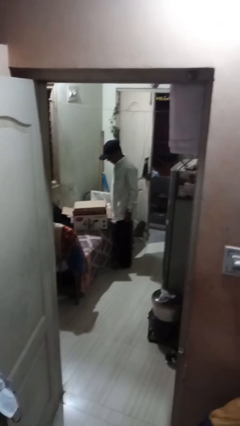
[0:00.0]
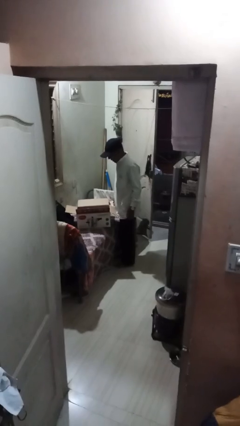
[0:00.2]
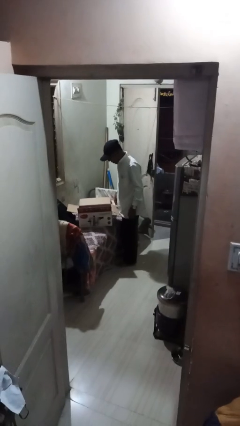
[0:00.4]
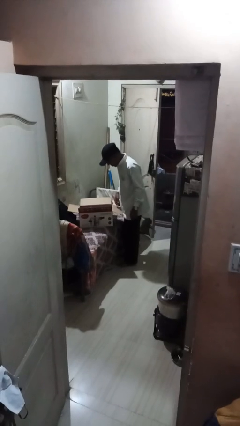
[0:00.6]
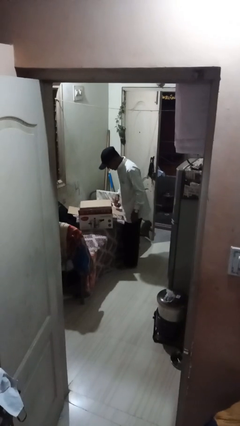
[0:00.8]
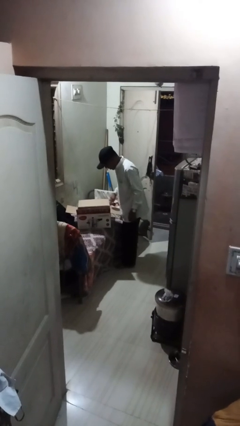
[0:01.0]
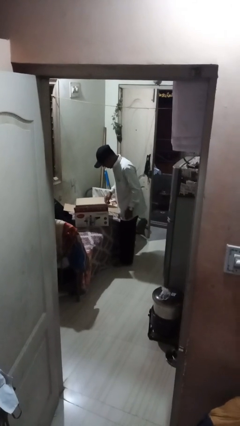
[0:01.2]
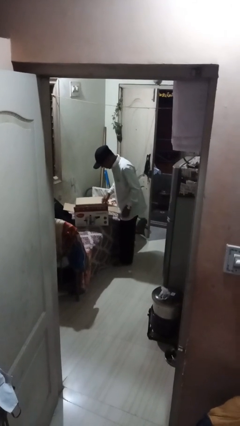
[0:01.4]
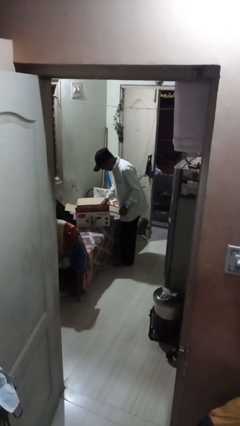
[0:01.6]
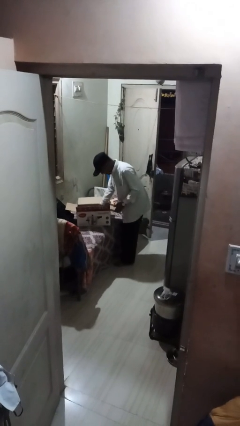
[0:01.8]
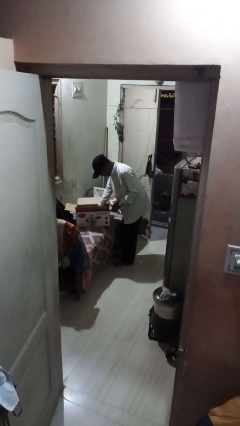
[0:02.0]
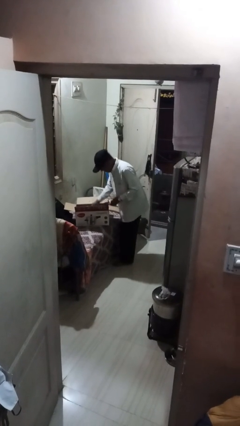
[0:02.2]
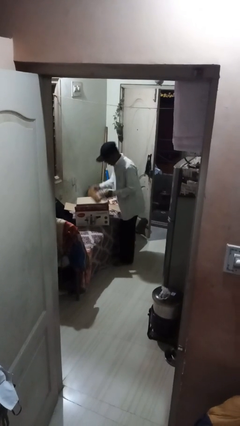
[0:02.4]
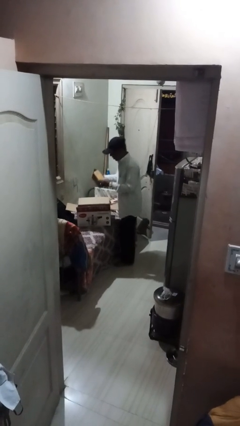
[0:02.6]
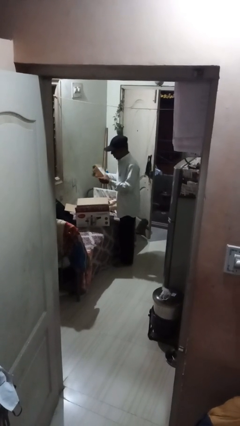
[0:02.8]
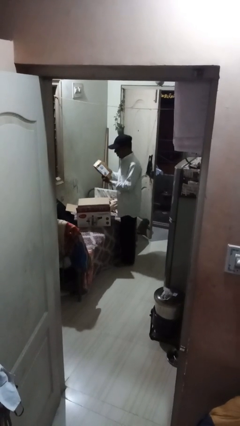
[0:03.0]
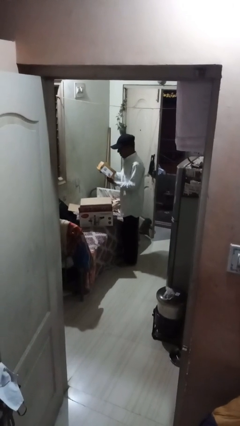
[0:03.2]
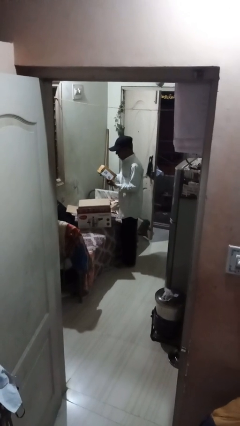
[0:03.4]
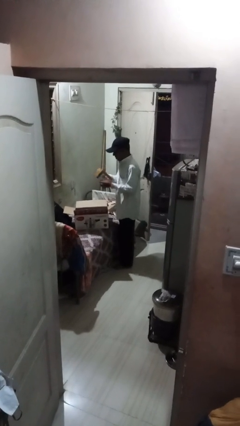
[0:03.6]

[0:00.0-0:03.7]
person takes object from box

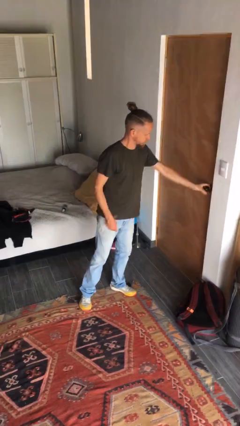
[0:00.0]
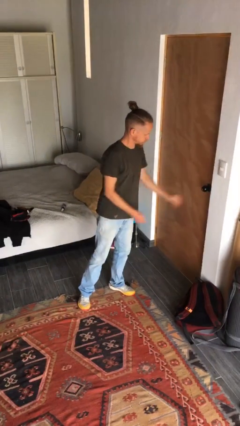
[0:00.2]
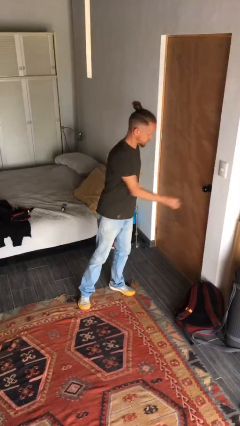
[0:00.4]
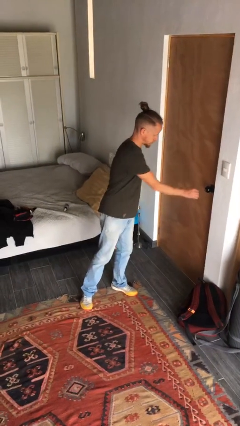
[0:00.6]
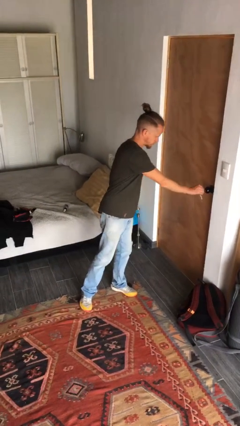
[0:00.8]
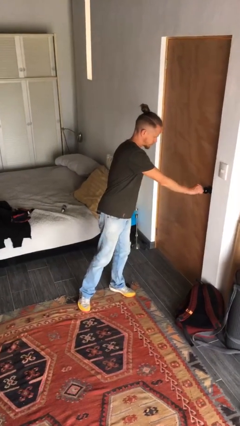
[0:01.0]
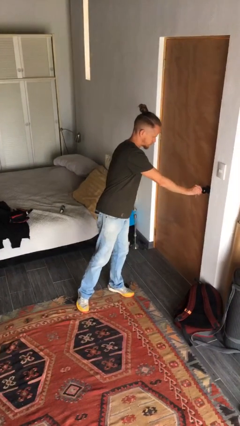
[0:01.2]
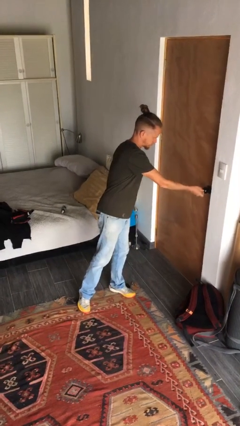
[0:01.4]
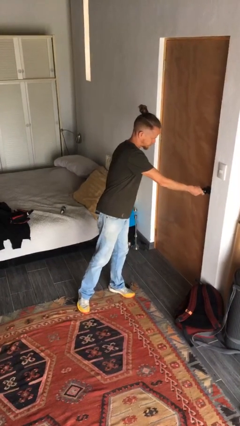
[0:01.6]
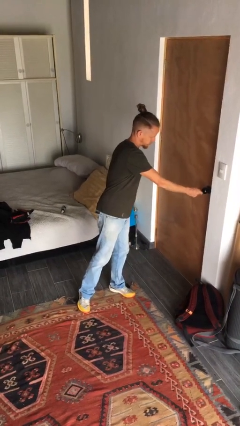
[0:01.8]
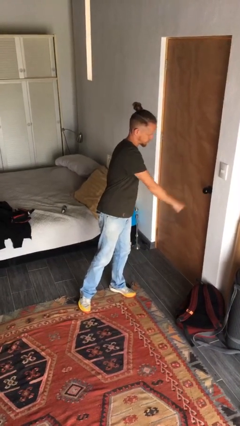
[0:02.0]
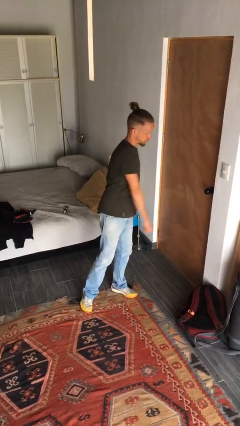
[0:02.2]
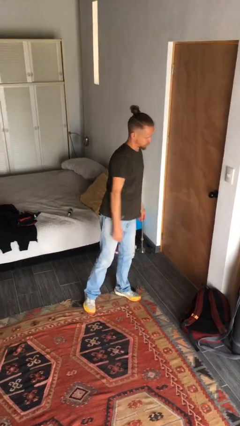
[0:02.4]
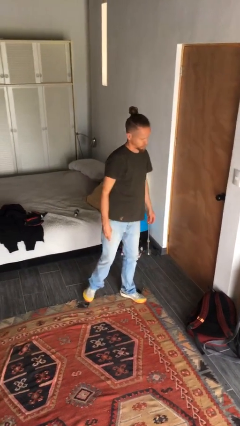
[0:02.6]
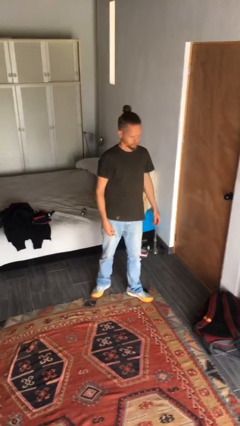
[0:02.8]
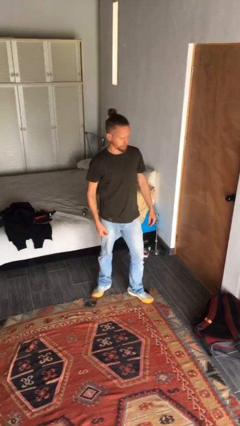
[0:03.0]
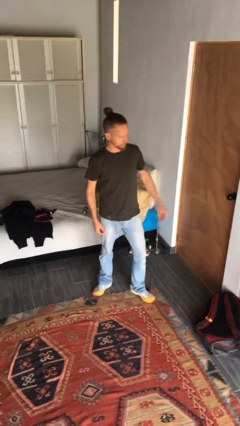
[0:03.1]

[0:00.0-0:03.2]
person locks door with keys

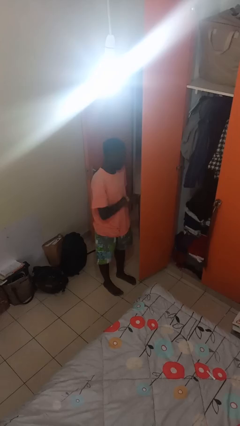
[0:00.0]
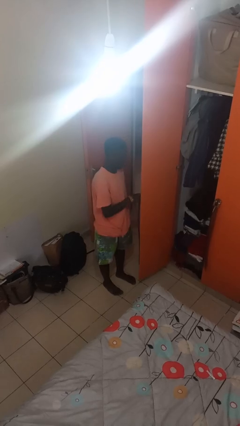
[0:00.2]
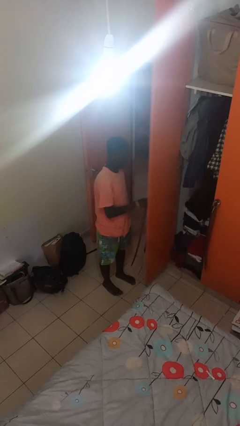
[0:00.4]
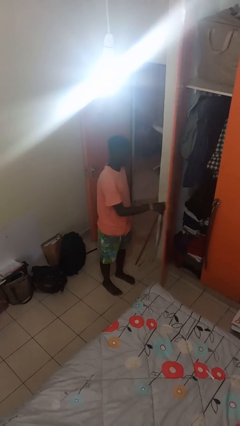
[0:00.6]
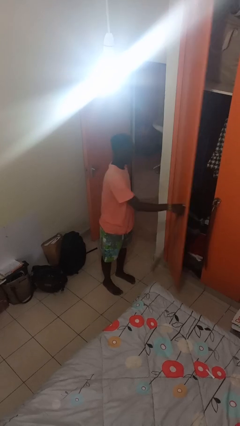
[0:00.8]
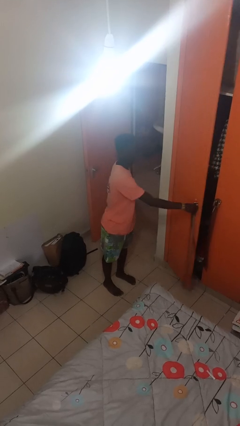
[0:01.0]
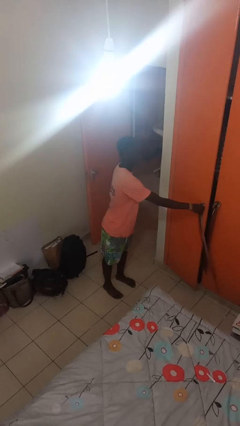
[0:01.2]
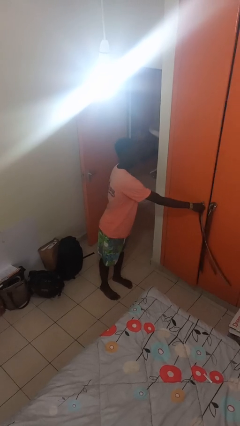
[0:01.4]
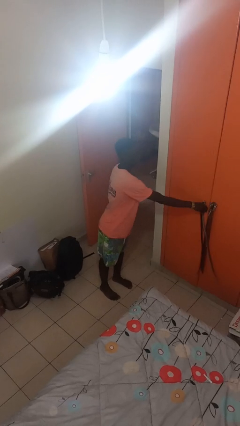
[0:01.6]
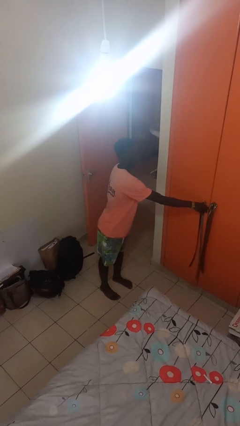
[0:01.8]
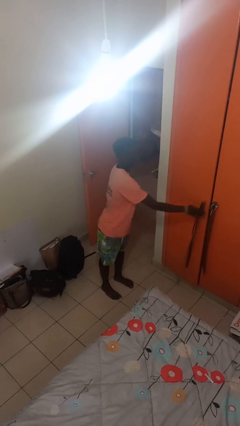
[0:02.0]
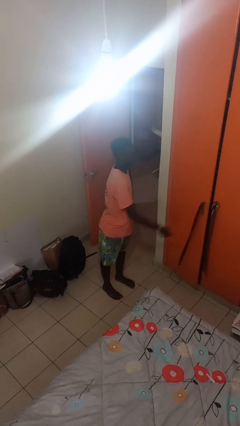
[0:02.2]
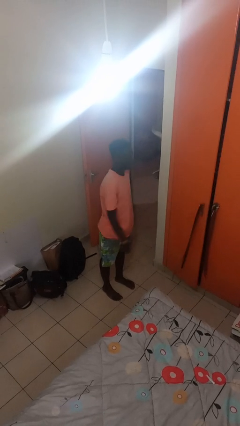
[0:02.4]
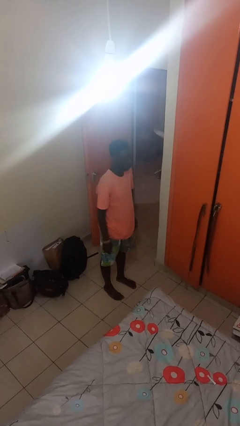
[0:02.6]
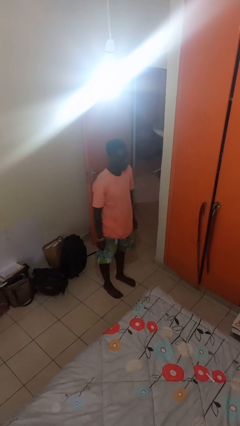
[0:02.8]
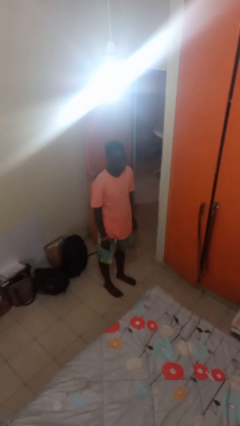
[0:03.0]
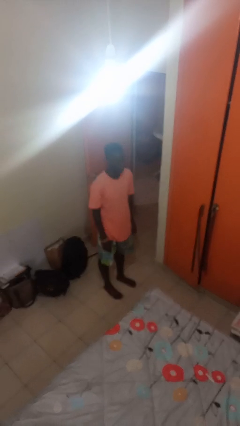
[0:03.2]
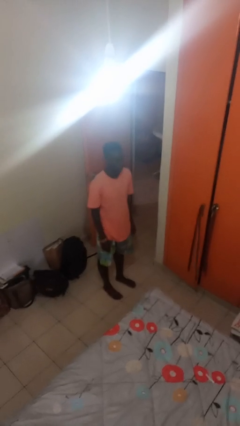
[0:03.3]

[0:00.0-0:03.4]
person closes closet door

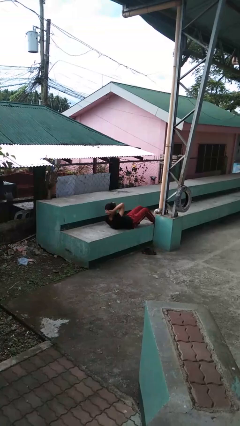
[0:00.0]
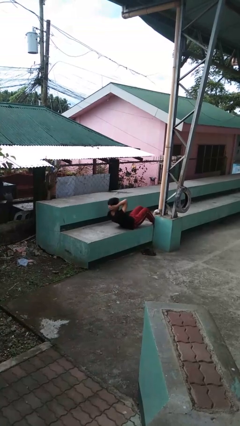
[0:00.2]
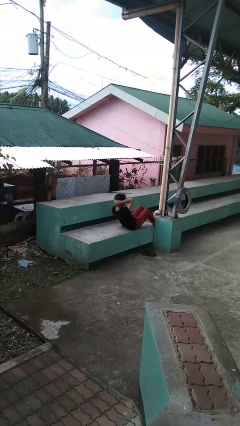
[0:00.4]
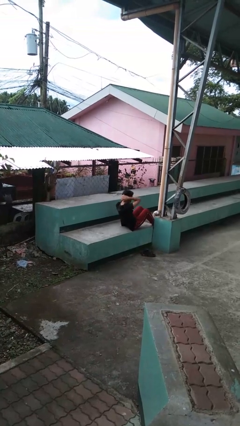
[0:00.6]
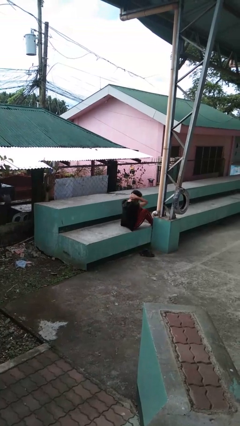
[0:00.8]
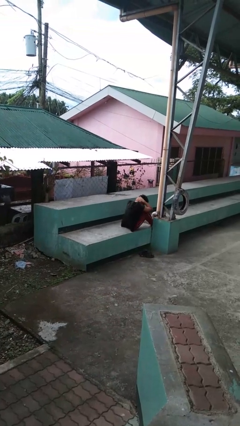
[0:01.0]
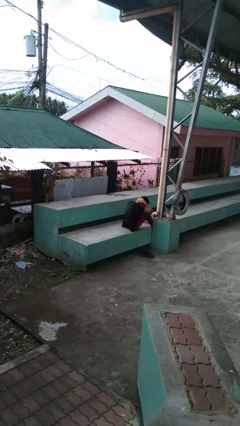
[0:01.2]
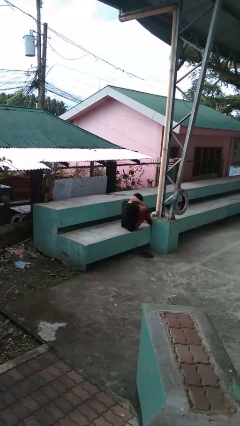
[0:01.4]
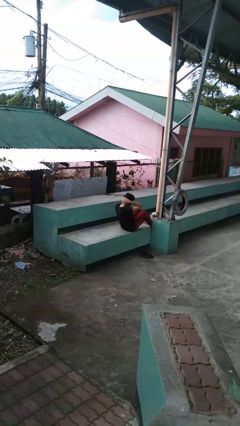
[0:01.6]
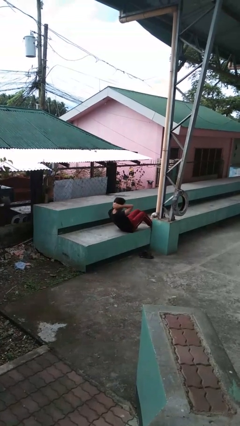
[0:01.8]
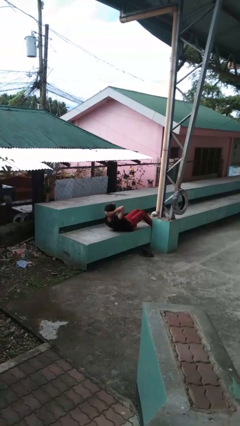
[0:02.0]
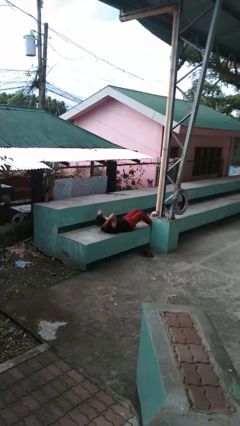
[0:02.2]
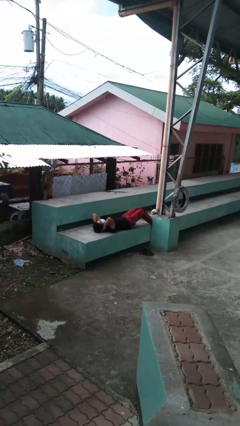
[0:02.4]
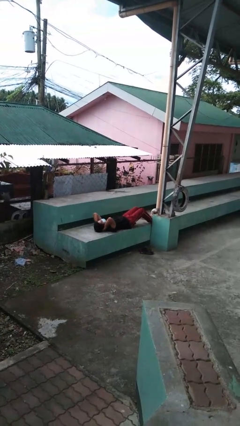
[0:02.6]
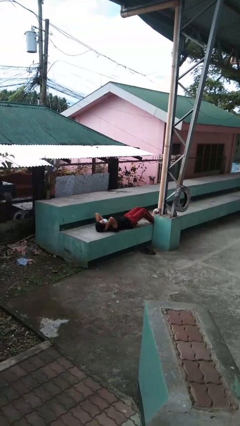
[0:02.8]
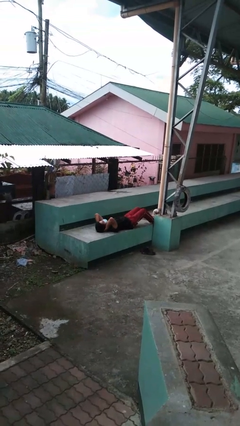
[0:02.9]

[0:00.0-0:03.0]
person exercises with situp

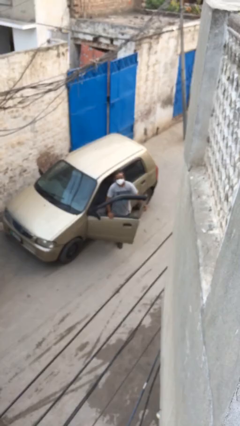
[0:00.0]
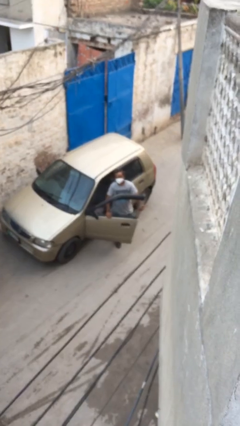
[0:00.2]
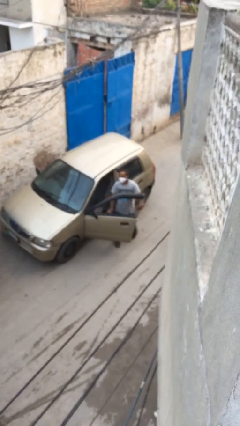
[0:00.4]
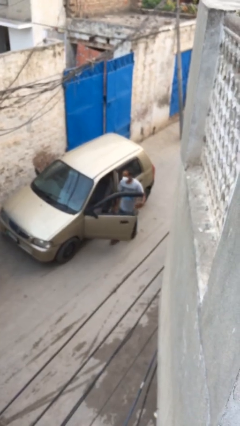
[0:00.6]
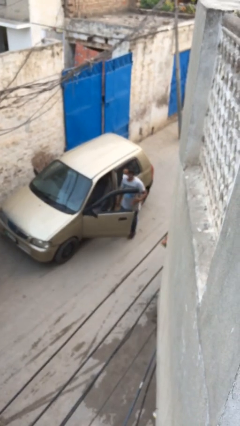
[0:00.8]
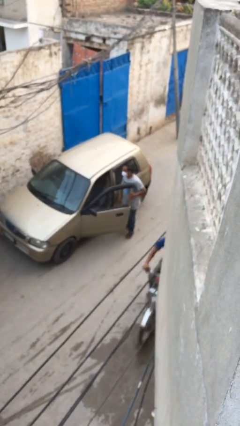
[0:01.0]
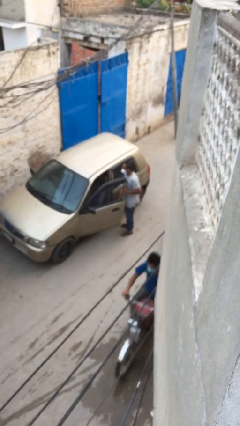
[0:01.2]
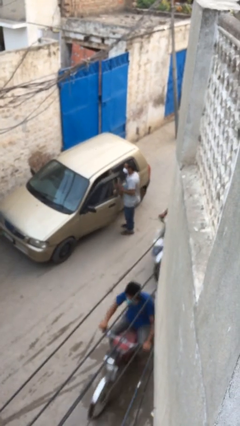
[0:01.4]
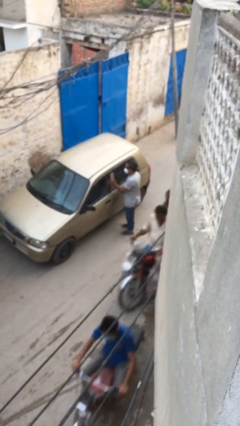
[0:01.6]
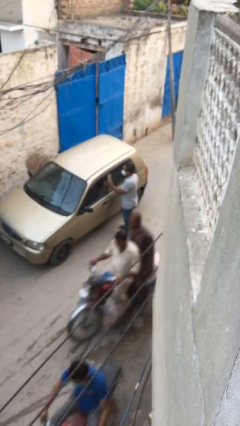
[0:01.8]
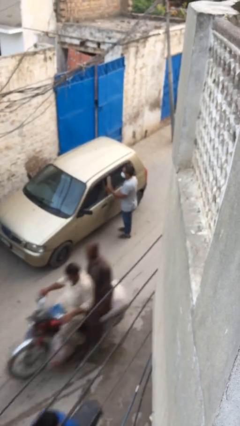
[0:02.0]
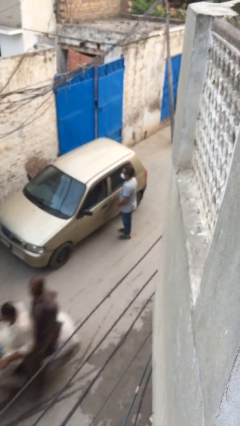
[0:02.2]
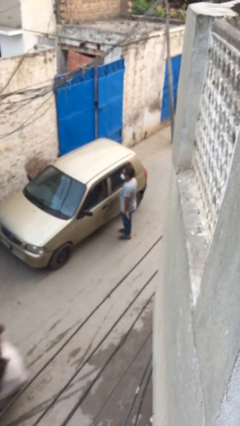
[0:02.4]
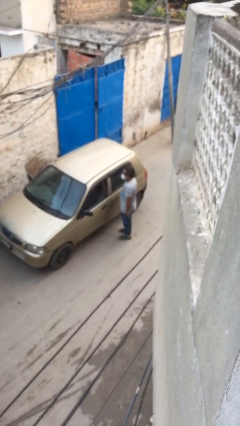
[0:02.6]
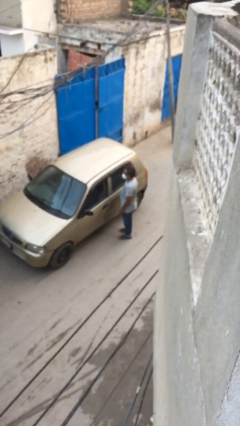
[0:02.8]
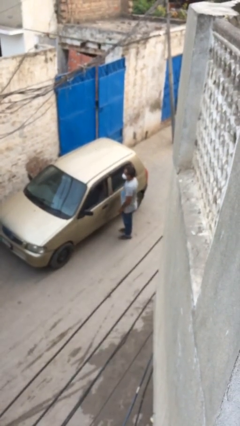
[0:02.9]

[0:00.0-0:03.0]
person closes car door

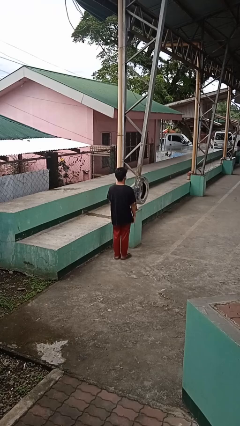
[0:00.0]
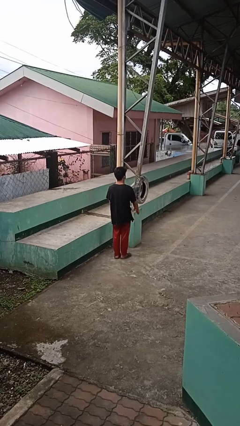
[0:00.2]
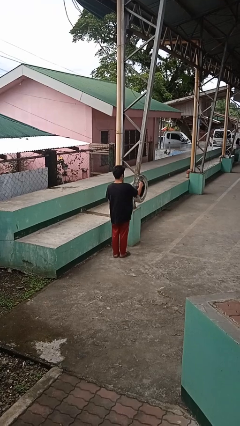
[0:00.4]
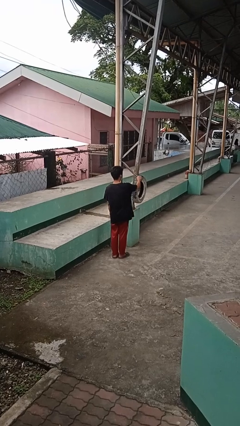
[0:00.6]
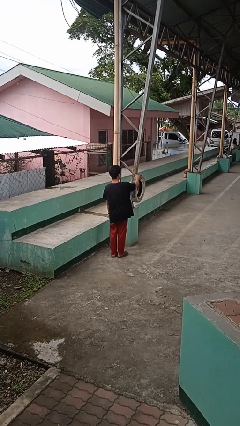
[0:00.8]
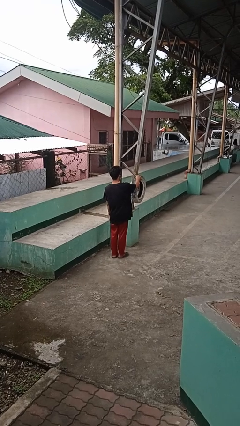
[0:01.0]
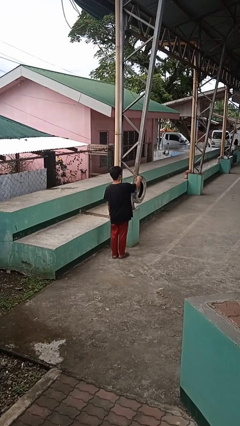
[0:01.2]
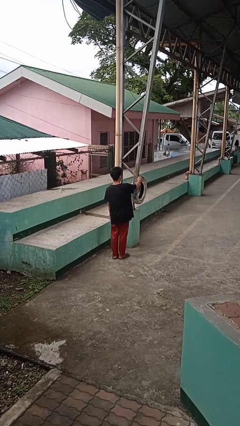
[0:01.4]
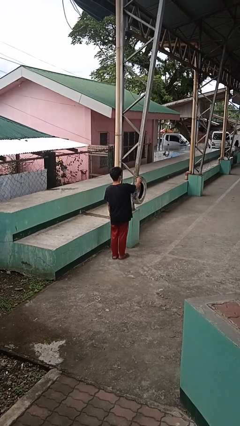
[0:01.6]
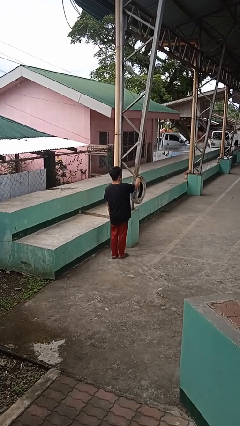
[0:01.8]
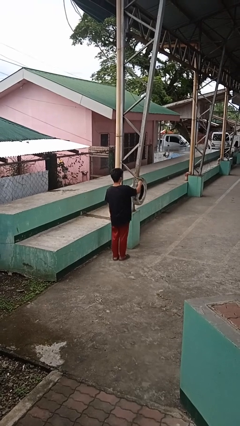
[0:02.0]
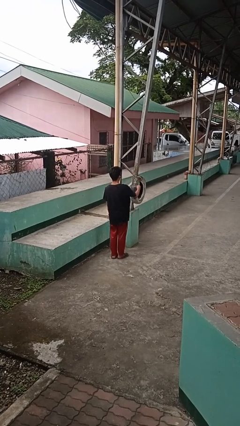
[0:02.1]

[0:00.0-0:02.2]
person taps object with finger
